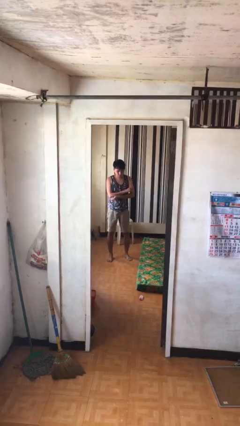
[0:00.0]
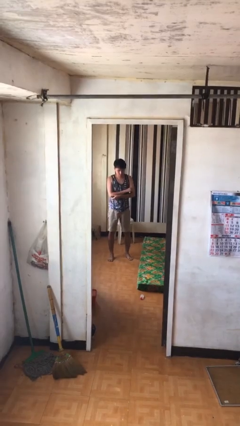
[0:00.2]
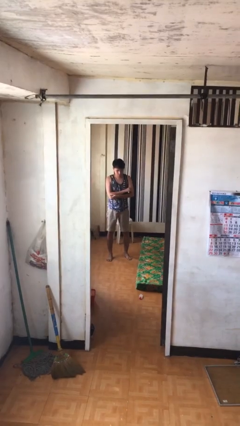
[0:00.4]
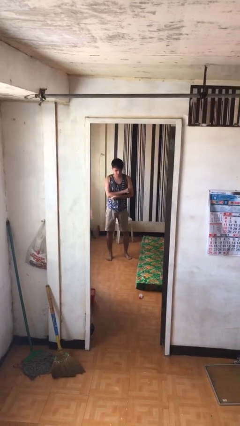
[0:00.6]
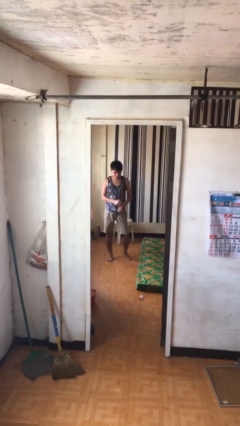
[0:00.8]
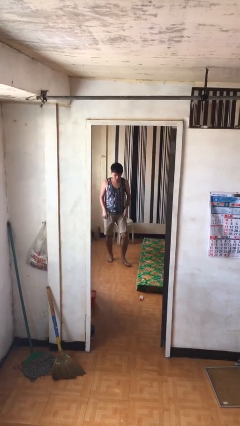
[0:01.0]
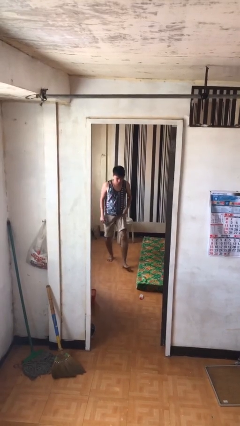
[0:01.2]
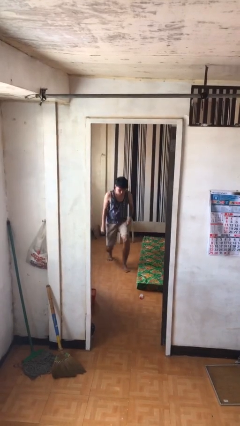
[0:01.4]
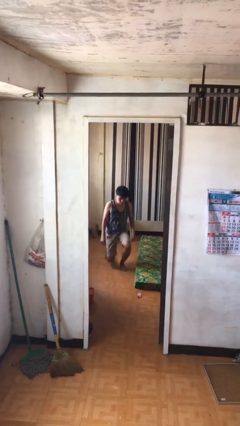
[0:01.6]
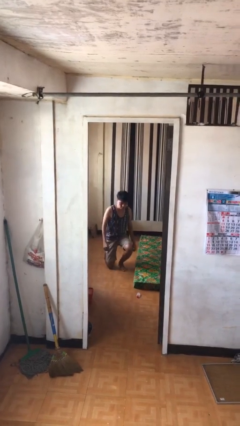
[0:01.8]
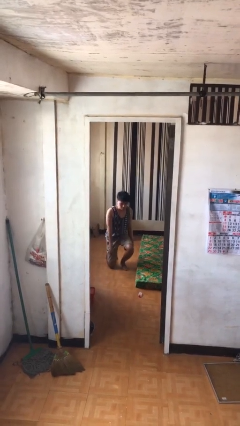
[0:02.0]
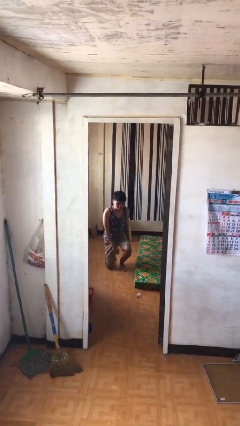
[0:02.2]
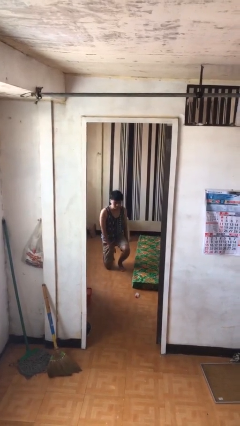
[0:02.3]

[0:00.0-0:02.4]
person kneels

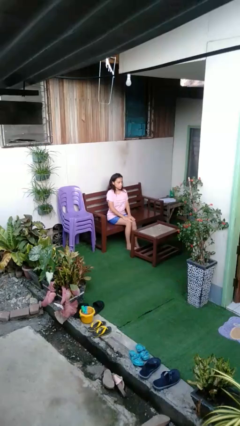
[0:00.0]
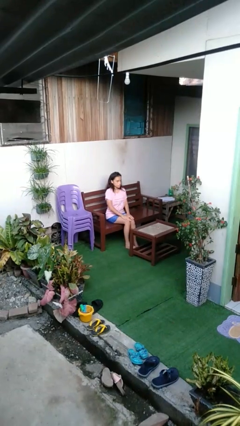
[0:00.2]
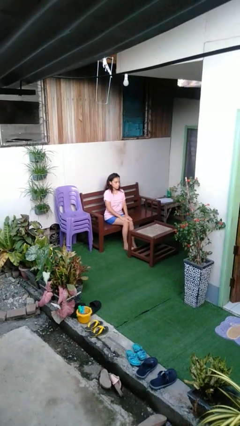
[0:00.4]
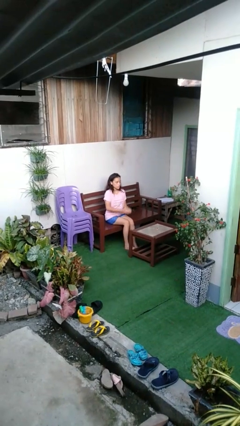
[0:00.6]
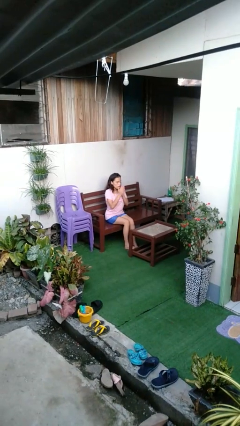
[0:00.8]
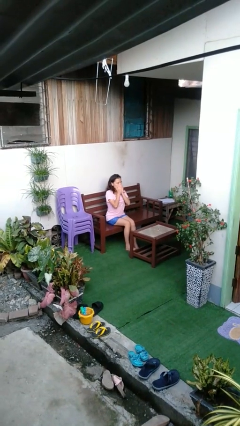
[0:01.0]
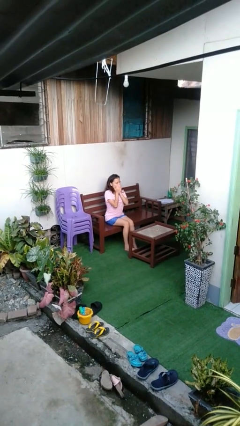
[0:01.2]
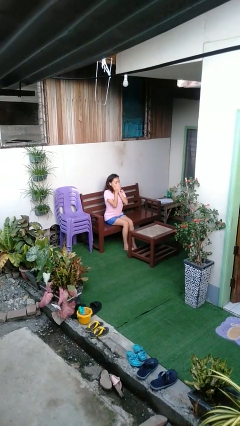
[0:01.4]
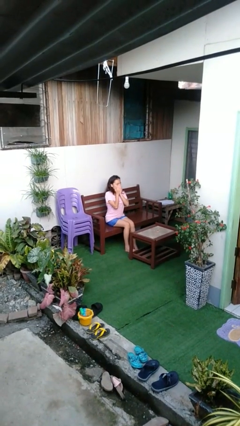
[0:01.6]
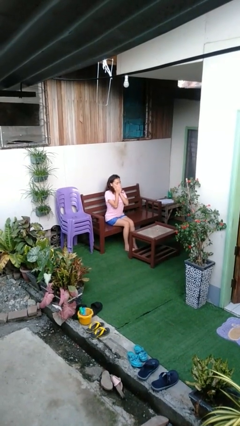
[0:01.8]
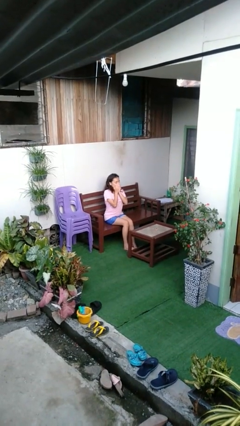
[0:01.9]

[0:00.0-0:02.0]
person yawns

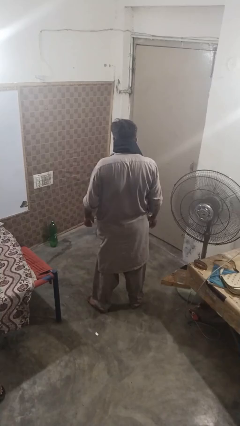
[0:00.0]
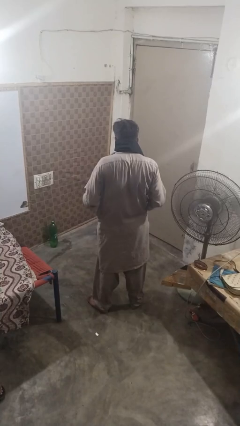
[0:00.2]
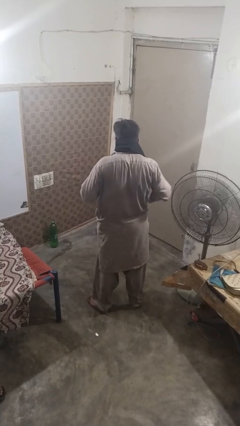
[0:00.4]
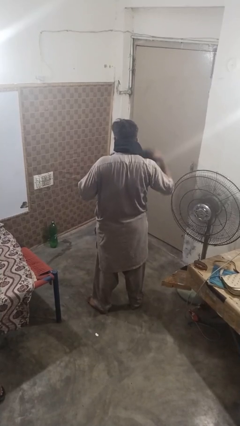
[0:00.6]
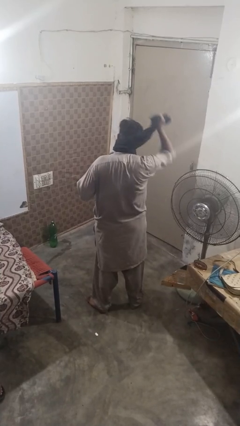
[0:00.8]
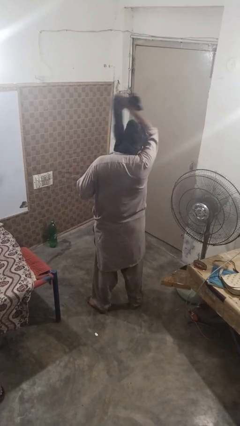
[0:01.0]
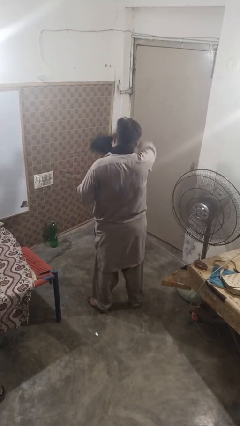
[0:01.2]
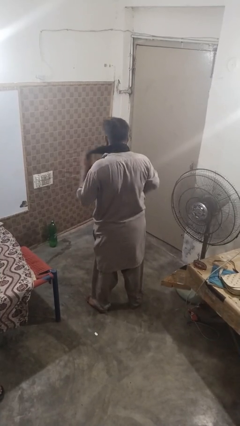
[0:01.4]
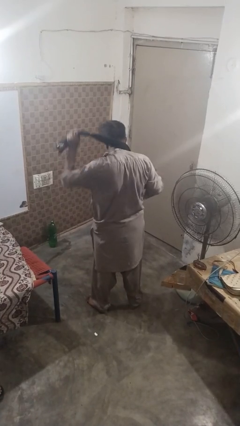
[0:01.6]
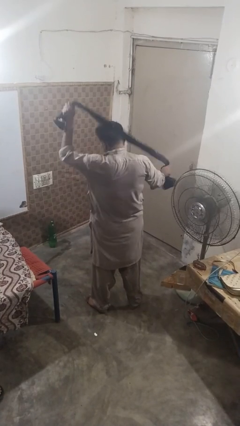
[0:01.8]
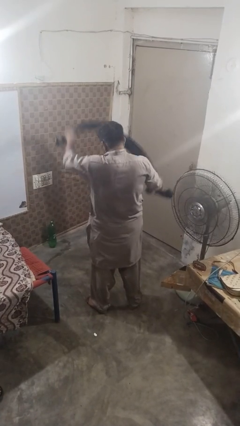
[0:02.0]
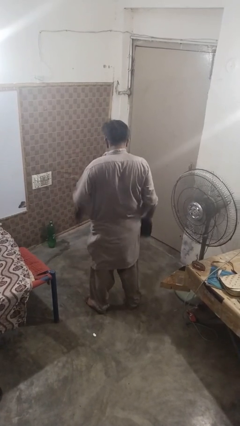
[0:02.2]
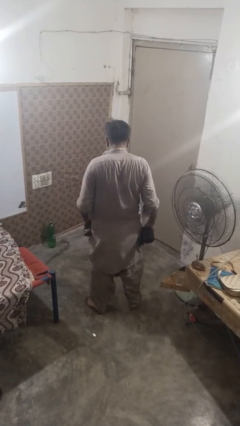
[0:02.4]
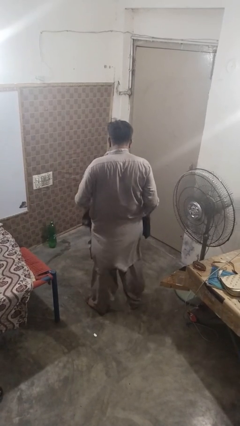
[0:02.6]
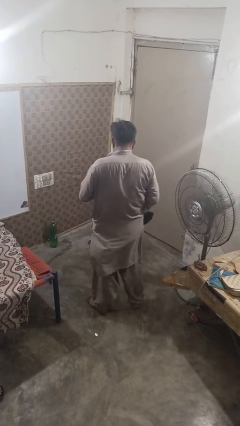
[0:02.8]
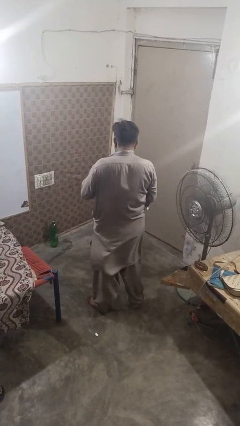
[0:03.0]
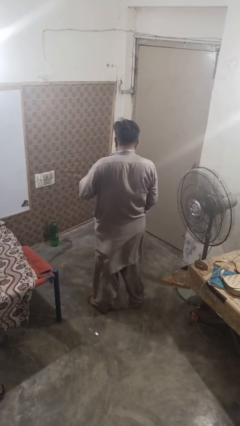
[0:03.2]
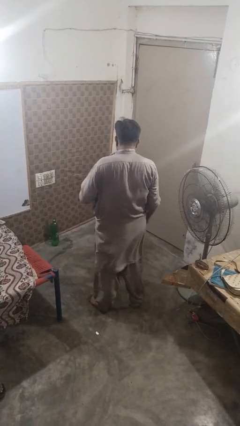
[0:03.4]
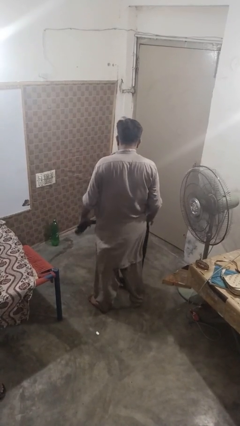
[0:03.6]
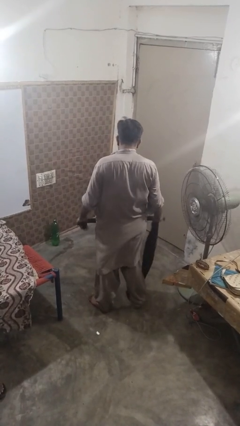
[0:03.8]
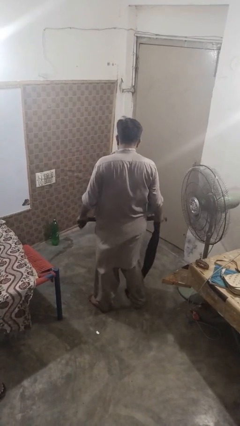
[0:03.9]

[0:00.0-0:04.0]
person takes off scarf

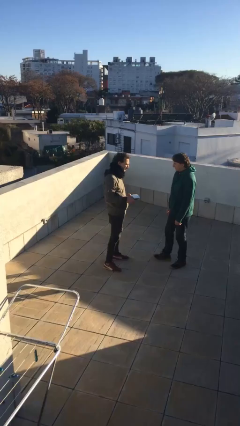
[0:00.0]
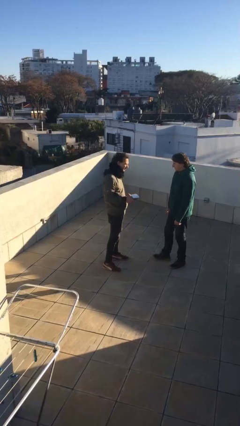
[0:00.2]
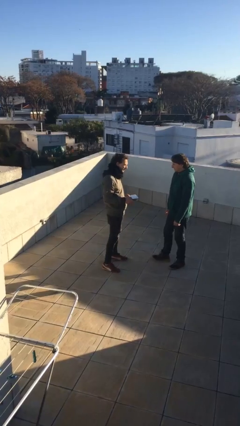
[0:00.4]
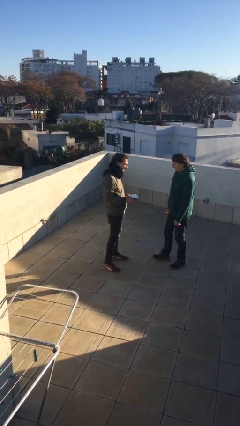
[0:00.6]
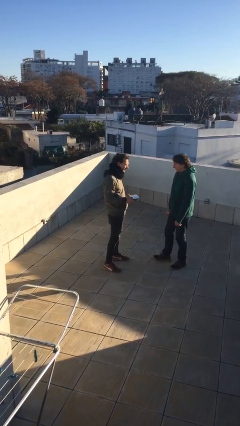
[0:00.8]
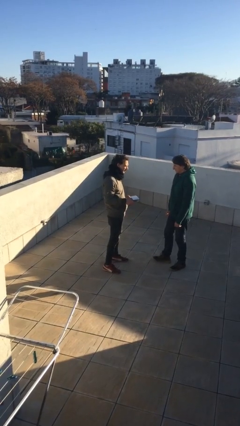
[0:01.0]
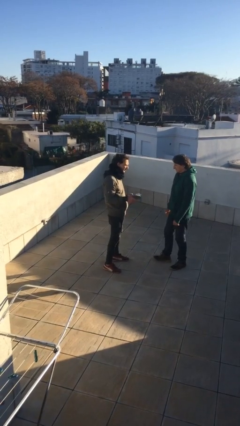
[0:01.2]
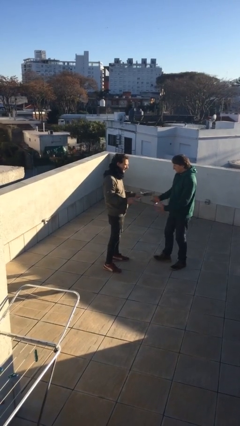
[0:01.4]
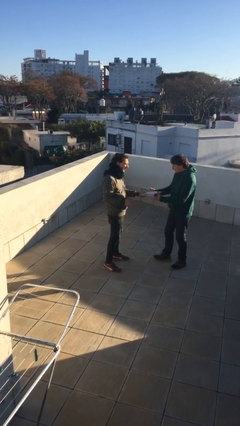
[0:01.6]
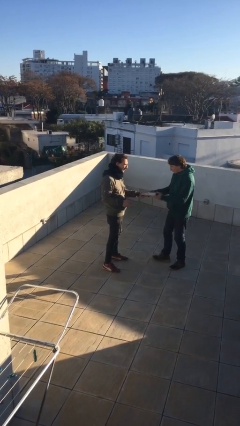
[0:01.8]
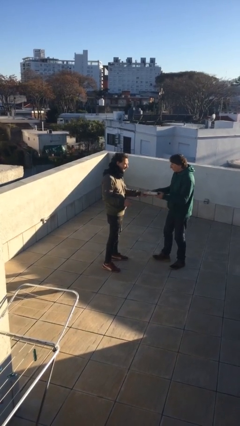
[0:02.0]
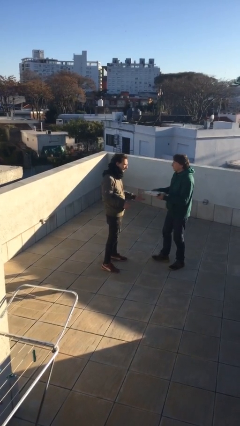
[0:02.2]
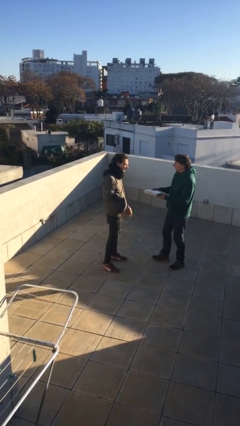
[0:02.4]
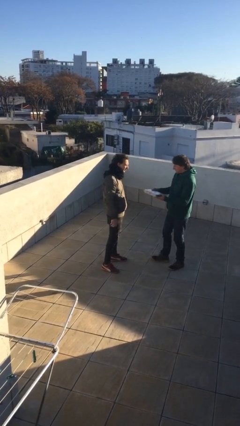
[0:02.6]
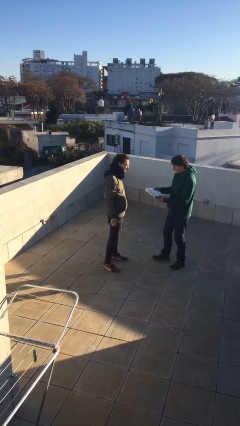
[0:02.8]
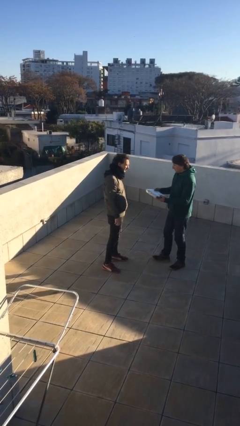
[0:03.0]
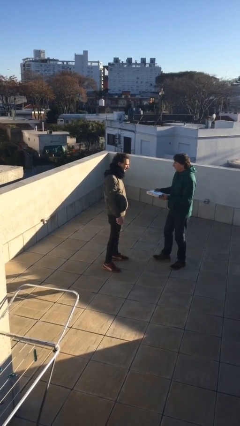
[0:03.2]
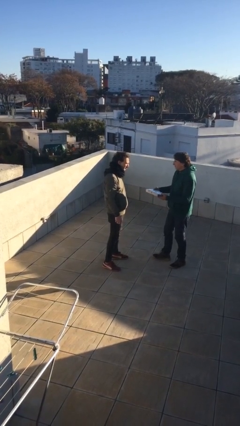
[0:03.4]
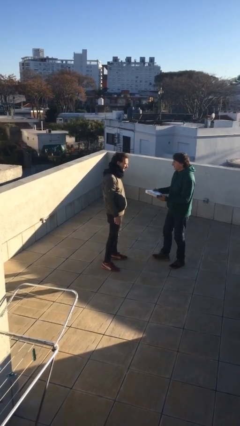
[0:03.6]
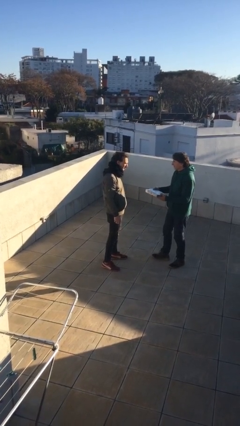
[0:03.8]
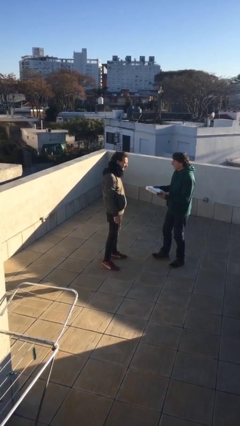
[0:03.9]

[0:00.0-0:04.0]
person transfers object to person

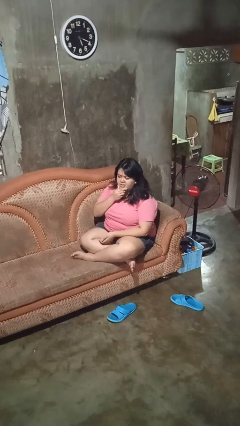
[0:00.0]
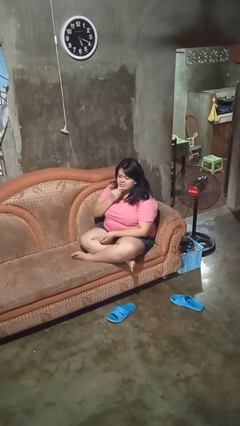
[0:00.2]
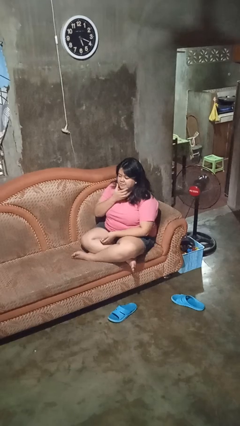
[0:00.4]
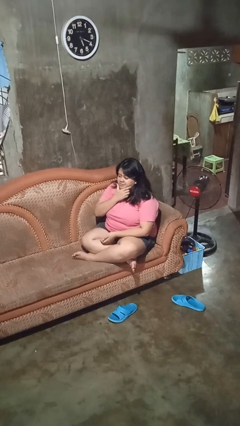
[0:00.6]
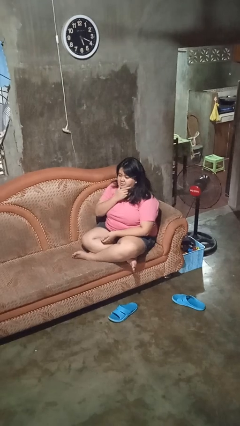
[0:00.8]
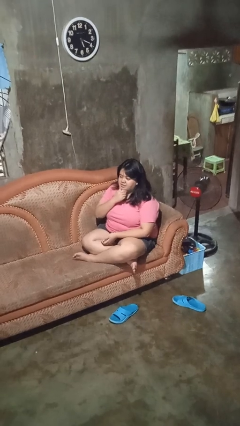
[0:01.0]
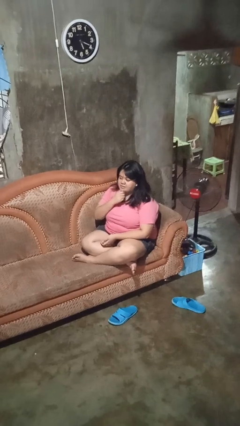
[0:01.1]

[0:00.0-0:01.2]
person strokes chin

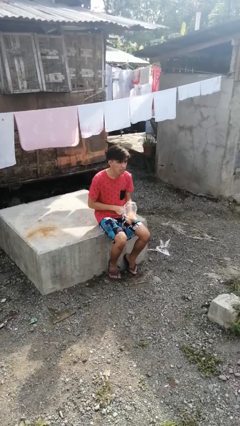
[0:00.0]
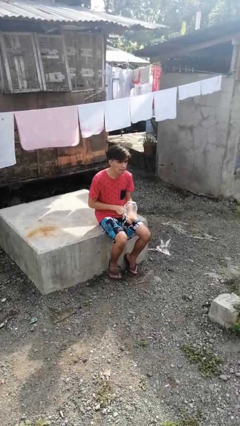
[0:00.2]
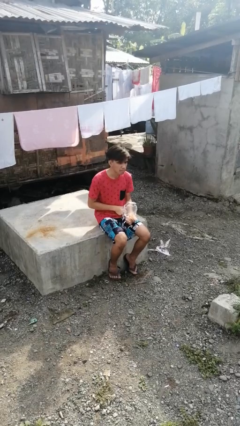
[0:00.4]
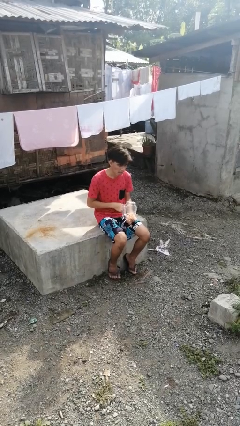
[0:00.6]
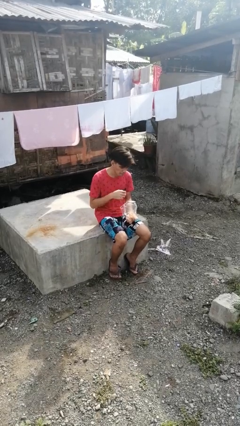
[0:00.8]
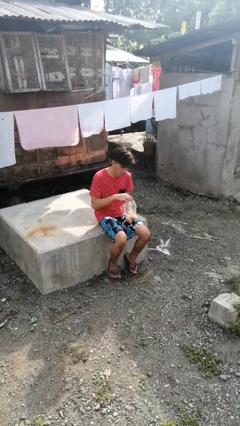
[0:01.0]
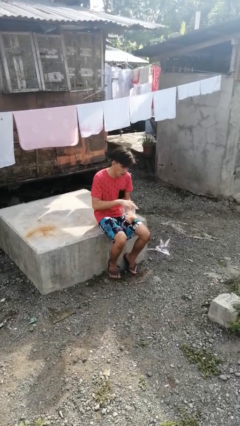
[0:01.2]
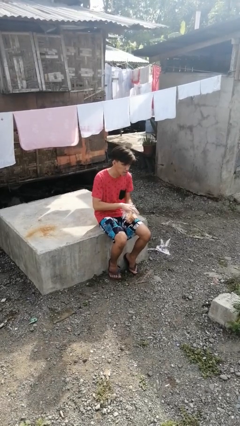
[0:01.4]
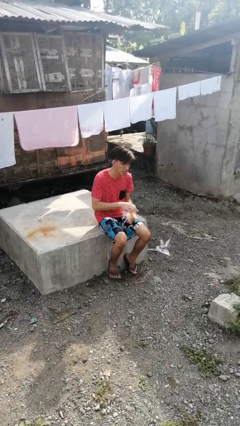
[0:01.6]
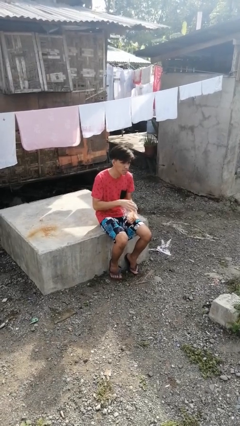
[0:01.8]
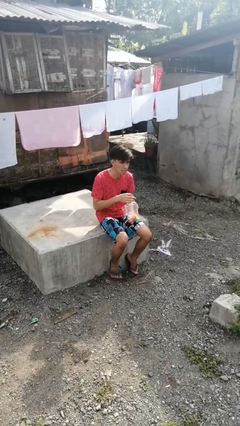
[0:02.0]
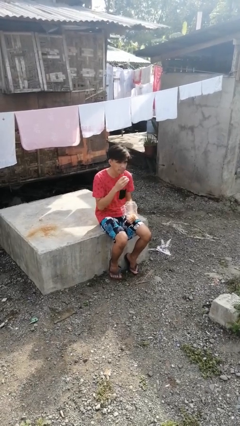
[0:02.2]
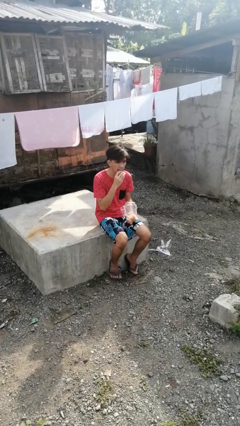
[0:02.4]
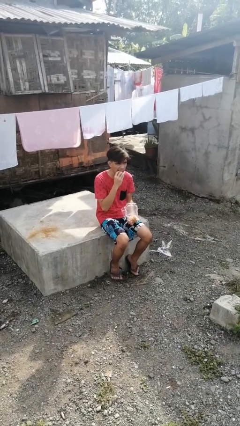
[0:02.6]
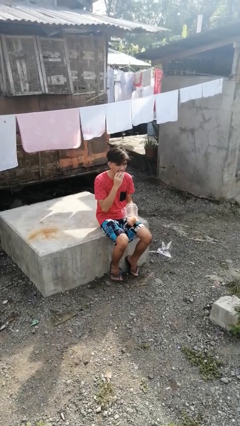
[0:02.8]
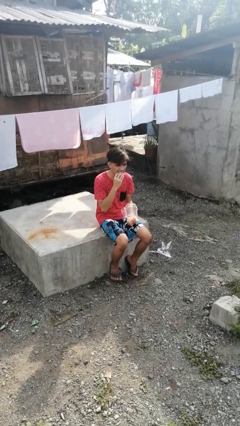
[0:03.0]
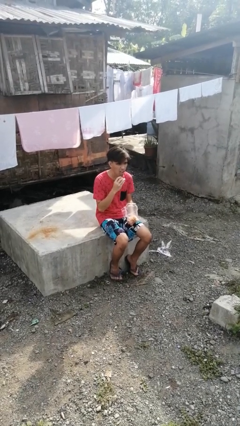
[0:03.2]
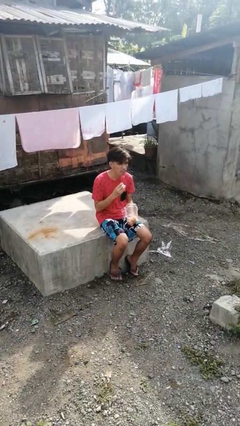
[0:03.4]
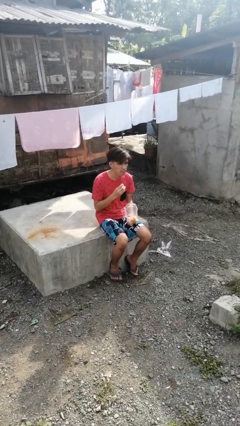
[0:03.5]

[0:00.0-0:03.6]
person eats snack from bag
